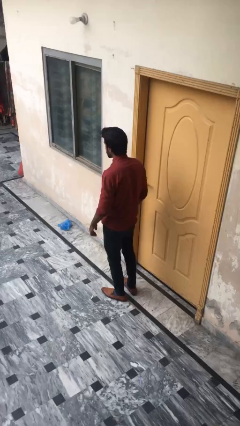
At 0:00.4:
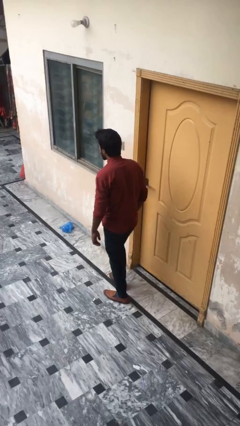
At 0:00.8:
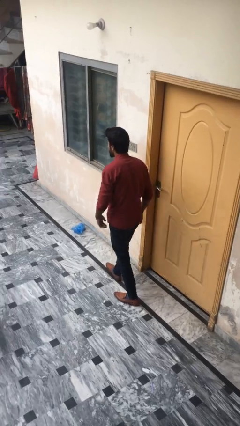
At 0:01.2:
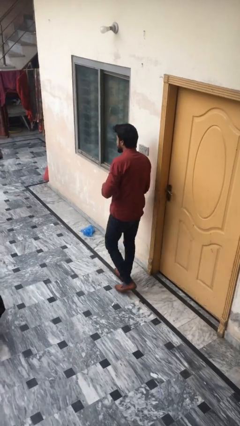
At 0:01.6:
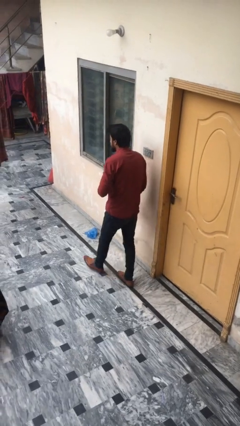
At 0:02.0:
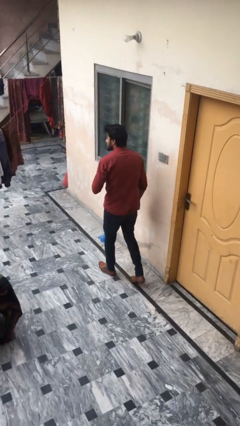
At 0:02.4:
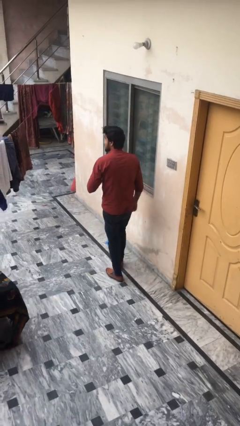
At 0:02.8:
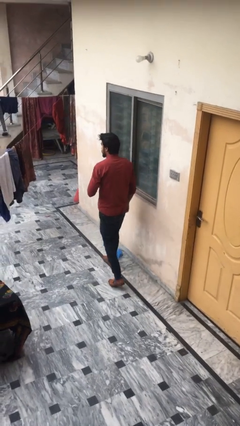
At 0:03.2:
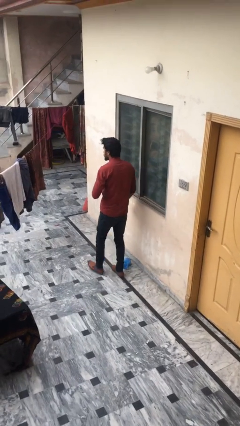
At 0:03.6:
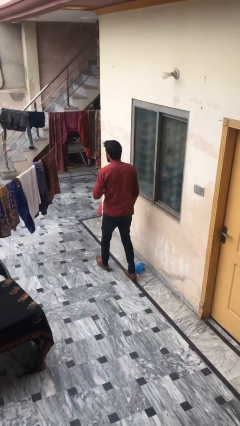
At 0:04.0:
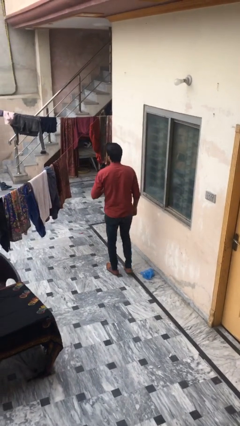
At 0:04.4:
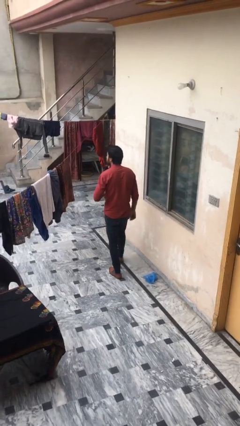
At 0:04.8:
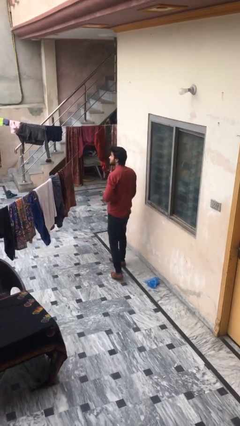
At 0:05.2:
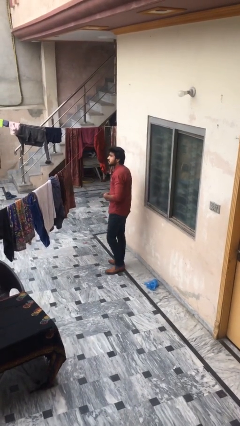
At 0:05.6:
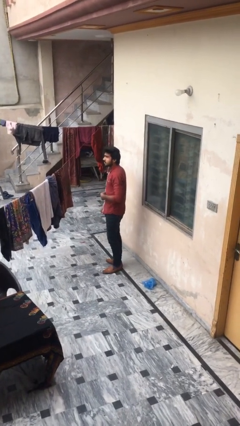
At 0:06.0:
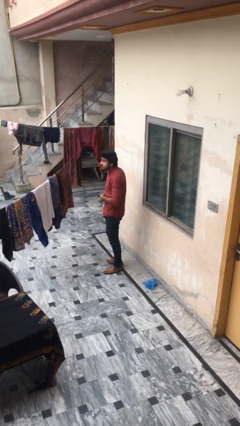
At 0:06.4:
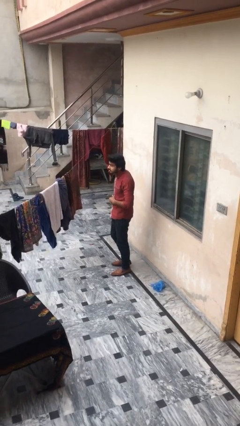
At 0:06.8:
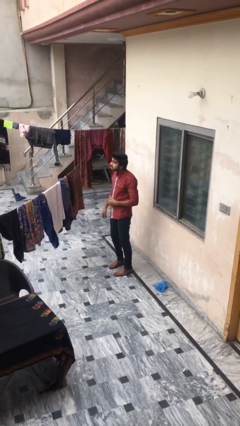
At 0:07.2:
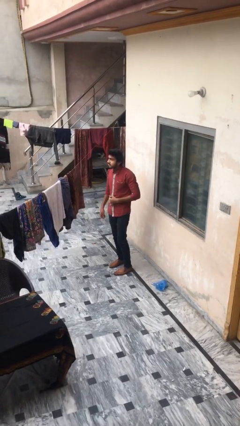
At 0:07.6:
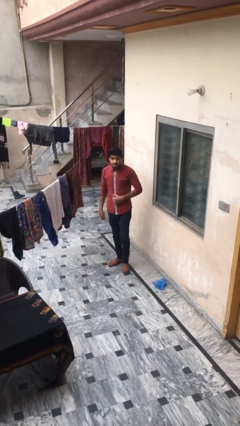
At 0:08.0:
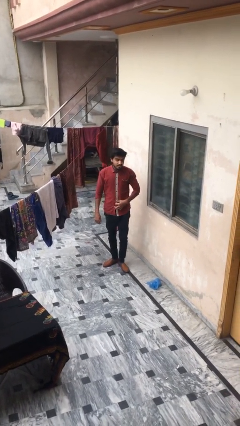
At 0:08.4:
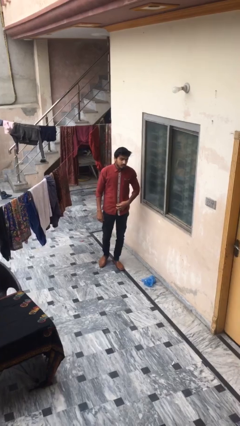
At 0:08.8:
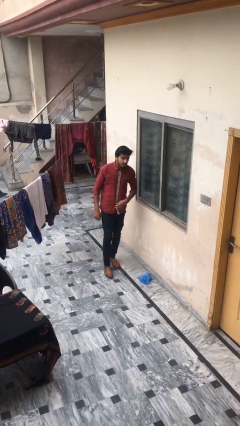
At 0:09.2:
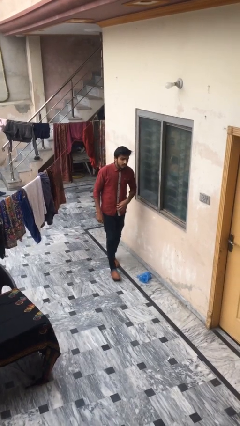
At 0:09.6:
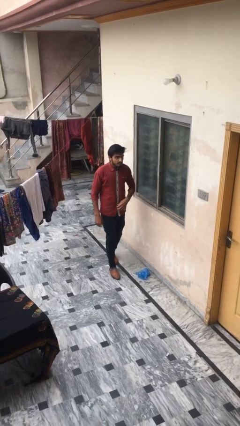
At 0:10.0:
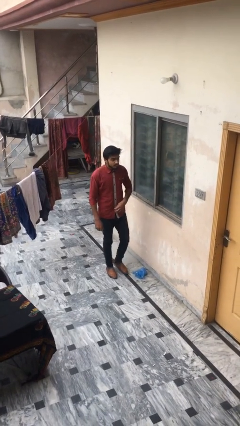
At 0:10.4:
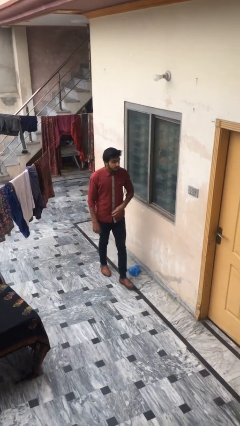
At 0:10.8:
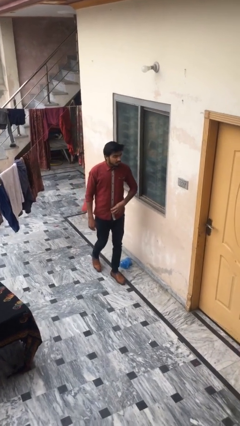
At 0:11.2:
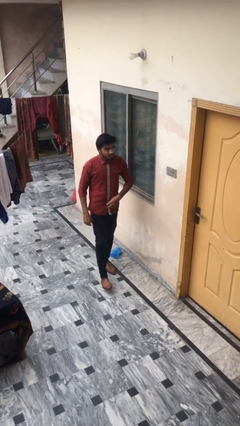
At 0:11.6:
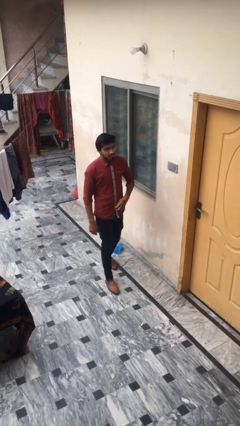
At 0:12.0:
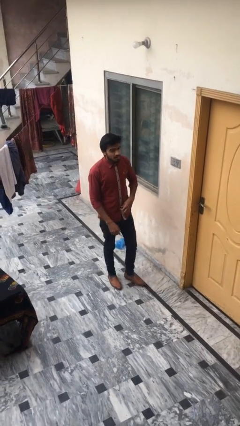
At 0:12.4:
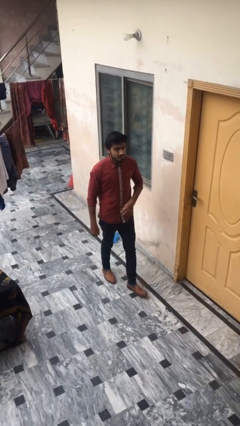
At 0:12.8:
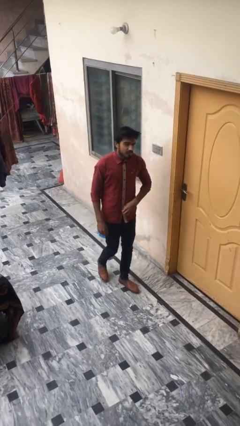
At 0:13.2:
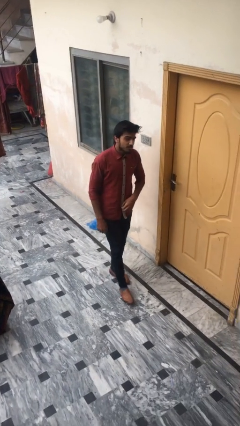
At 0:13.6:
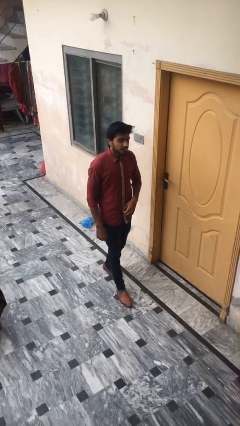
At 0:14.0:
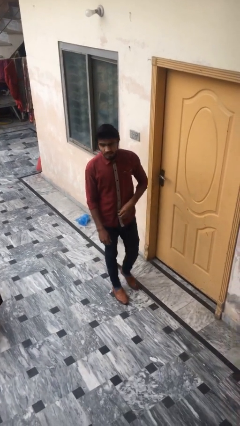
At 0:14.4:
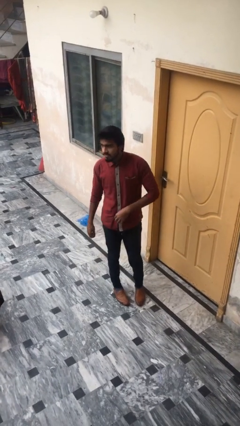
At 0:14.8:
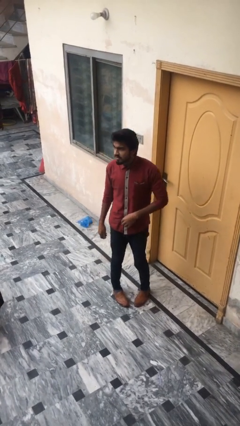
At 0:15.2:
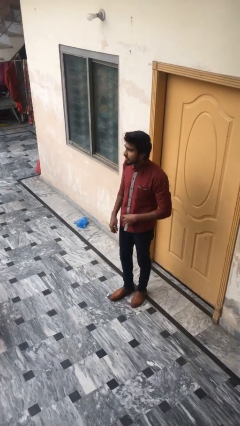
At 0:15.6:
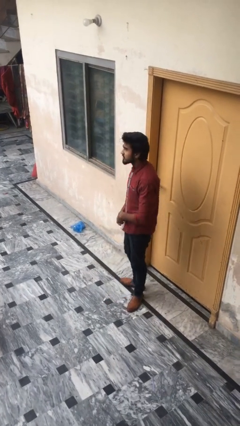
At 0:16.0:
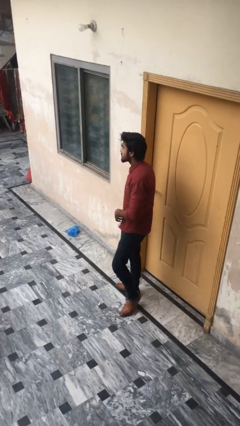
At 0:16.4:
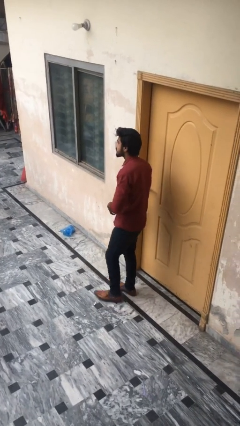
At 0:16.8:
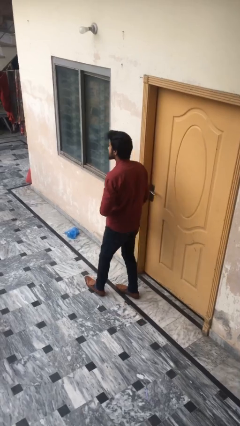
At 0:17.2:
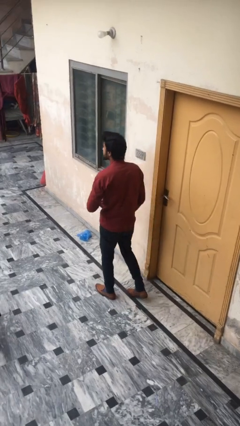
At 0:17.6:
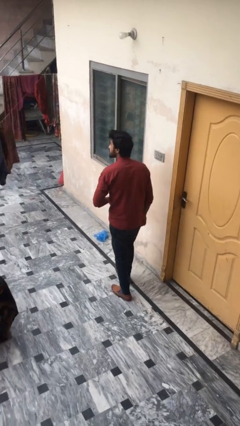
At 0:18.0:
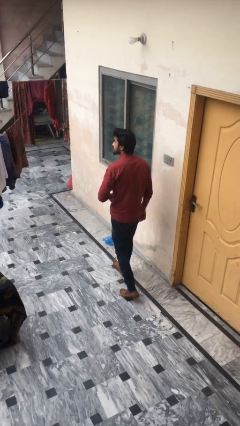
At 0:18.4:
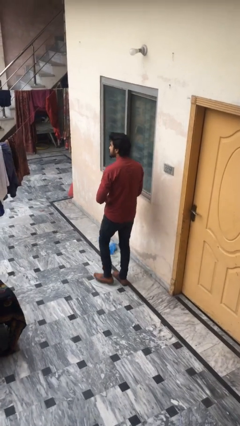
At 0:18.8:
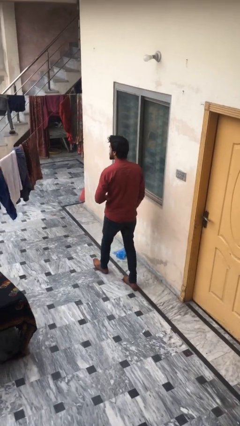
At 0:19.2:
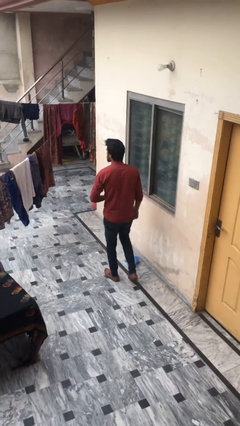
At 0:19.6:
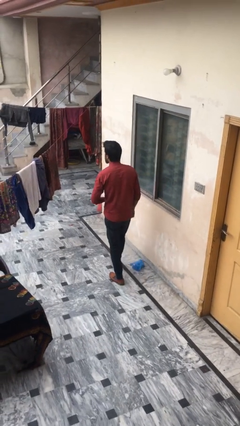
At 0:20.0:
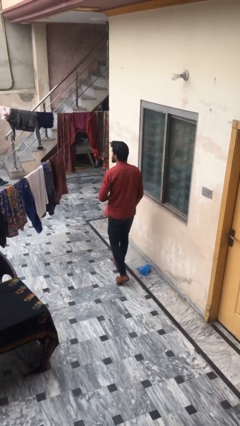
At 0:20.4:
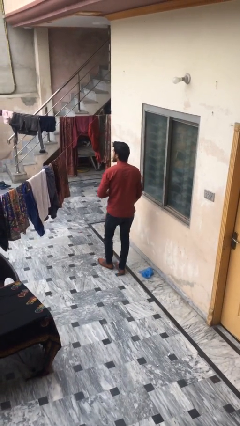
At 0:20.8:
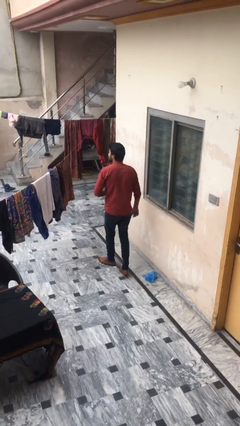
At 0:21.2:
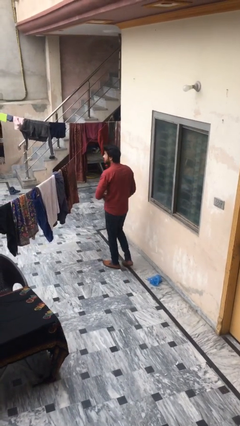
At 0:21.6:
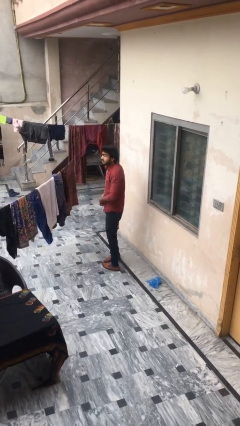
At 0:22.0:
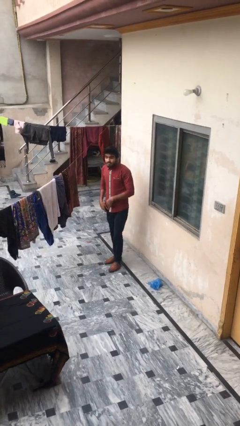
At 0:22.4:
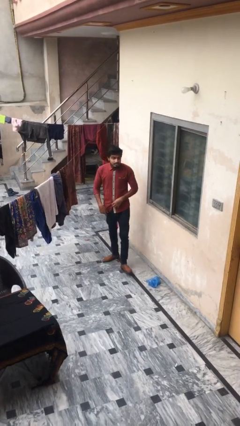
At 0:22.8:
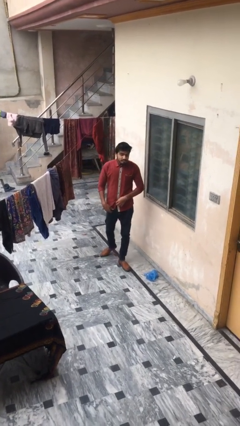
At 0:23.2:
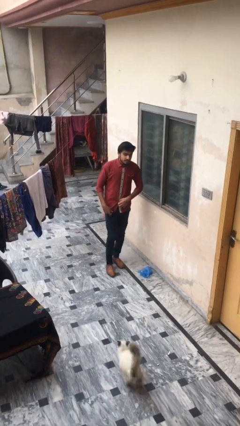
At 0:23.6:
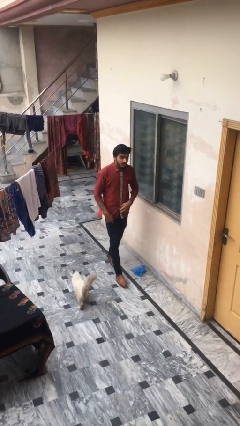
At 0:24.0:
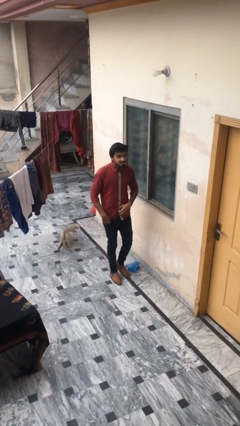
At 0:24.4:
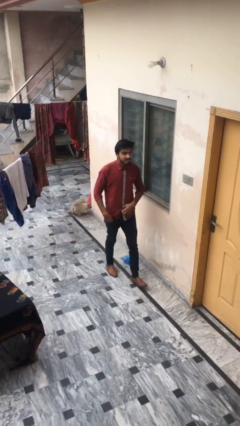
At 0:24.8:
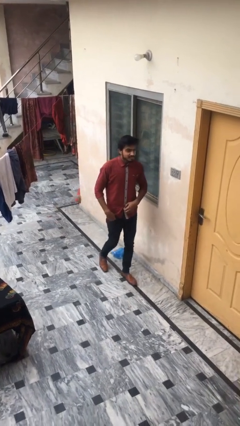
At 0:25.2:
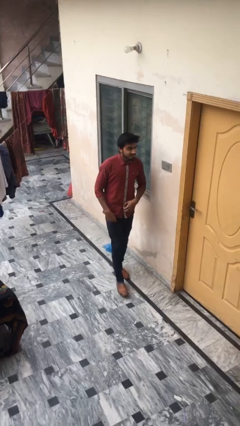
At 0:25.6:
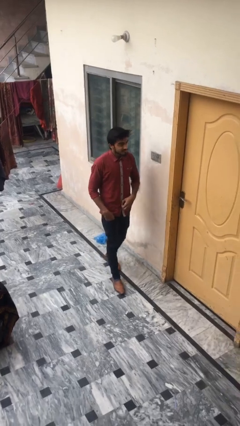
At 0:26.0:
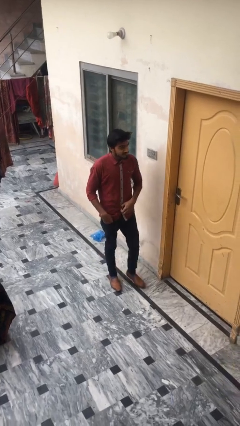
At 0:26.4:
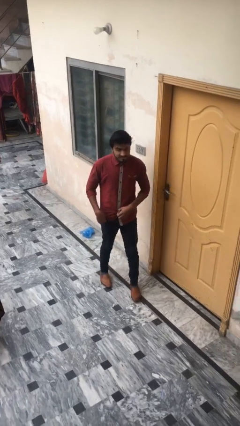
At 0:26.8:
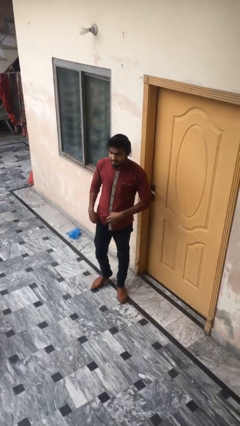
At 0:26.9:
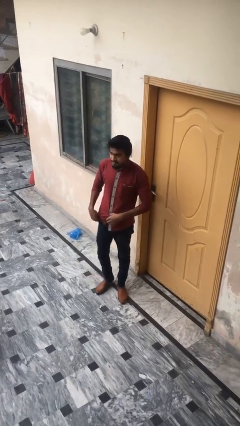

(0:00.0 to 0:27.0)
person walks

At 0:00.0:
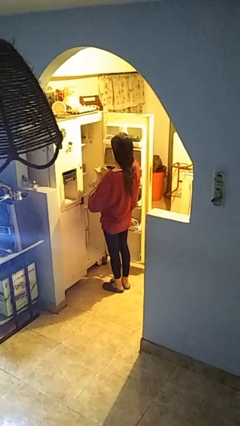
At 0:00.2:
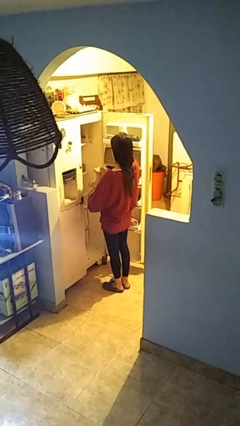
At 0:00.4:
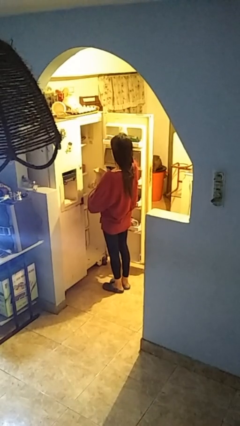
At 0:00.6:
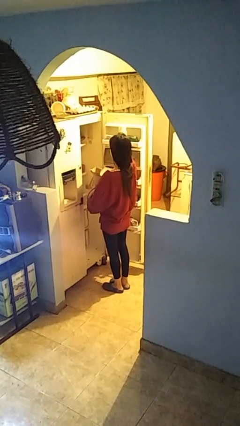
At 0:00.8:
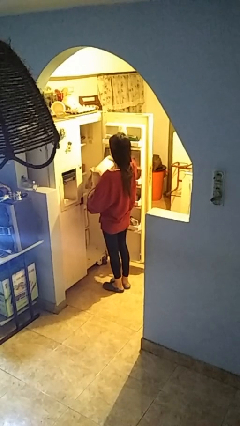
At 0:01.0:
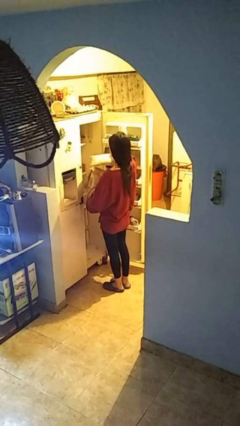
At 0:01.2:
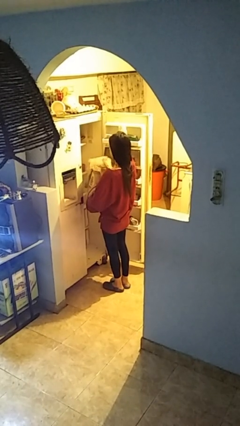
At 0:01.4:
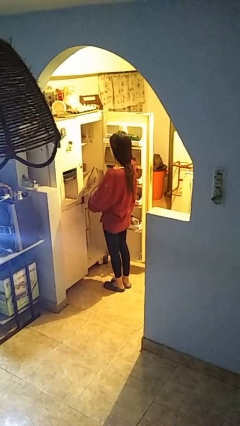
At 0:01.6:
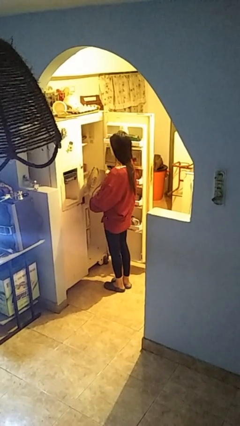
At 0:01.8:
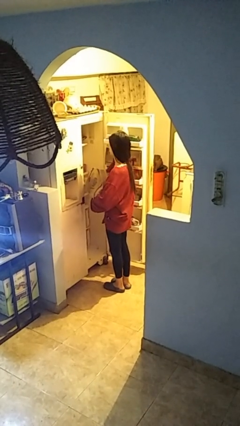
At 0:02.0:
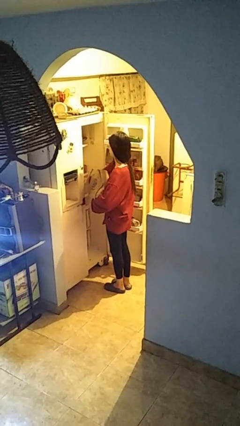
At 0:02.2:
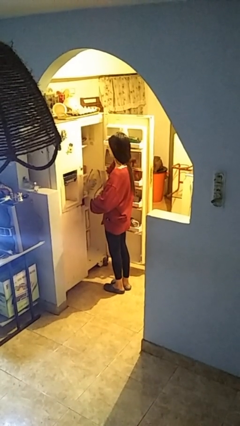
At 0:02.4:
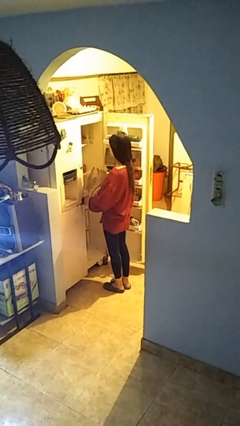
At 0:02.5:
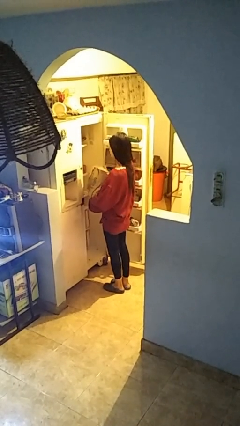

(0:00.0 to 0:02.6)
person loads groceries into refrigerator

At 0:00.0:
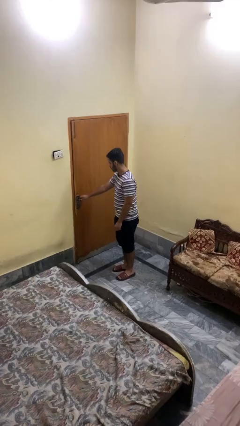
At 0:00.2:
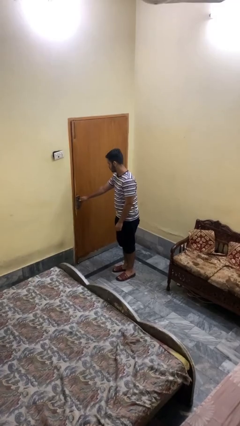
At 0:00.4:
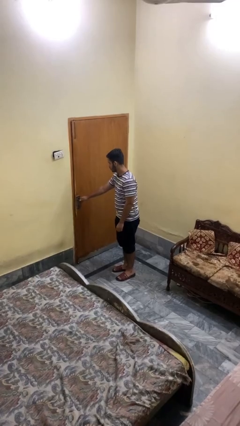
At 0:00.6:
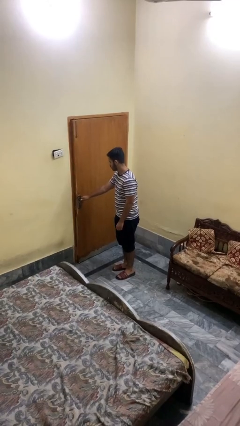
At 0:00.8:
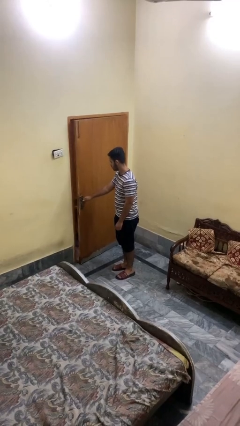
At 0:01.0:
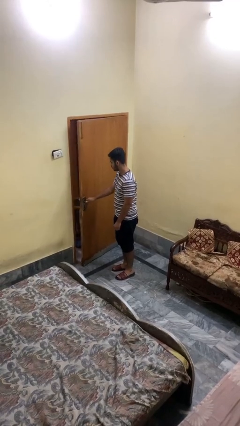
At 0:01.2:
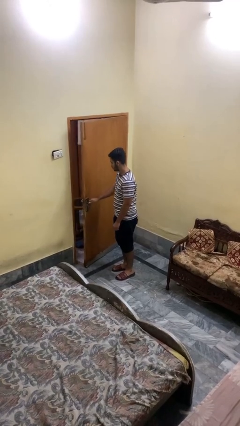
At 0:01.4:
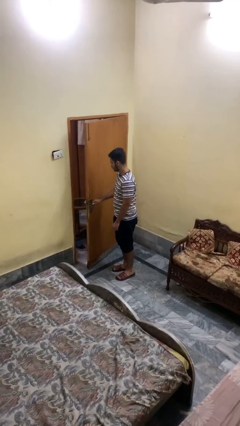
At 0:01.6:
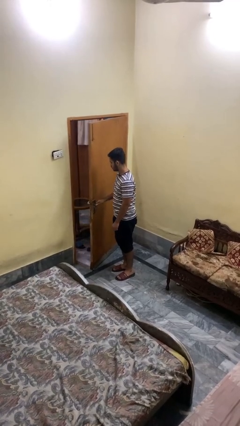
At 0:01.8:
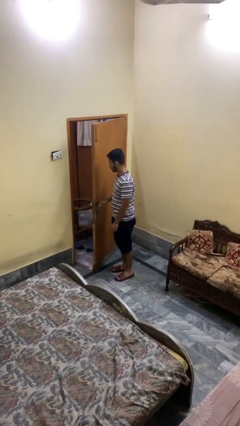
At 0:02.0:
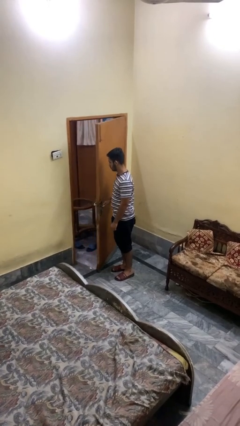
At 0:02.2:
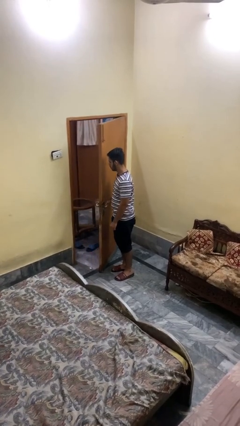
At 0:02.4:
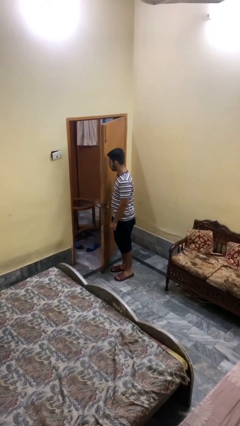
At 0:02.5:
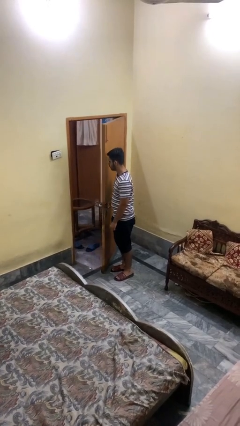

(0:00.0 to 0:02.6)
person opens facility door
